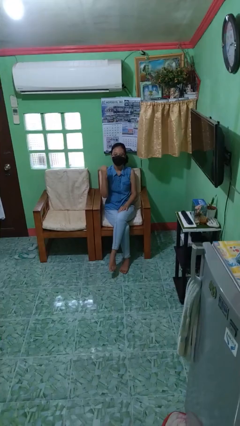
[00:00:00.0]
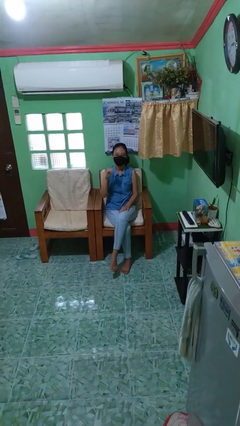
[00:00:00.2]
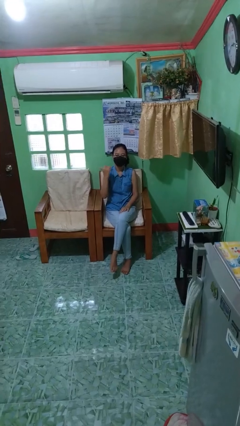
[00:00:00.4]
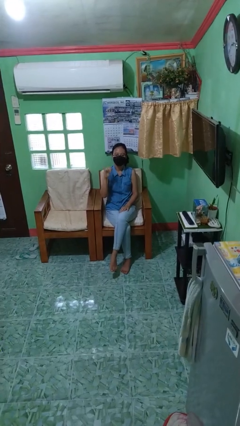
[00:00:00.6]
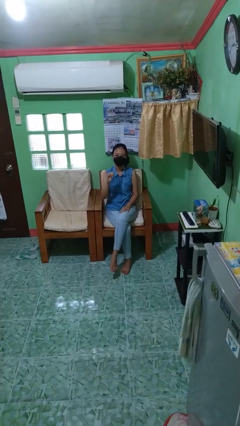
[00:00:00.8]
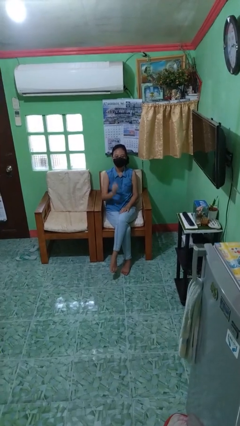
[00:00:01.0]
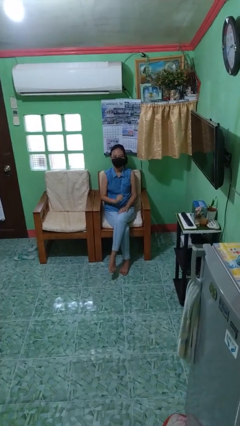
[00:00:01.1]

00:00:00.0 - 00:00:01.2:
person gestures hang loose

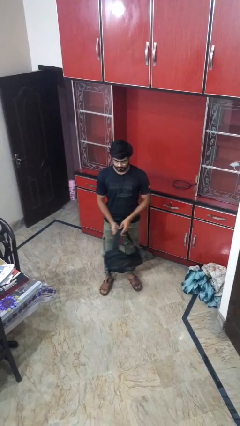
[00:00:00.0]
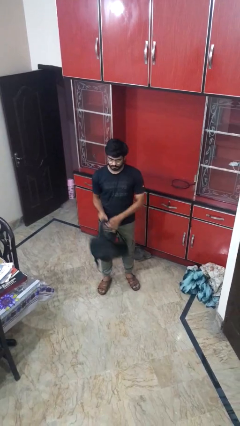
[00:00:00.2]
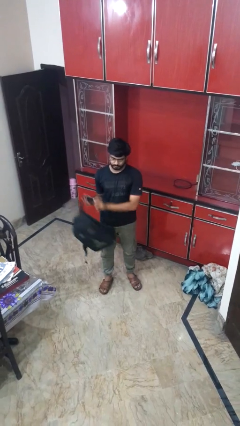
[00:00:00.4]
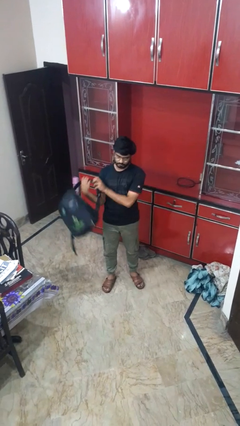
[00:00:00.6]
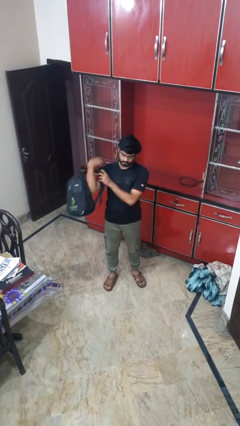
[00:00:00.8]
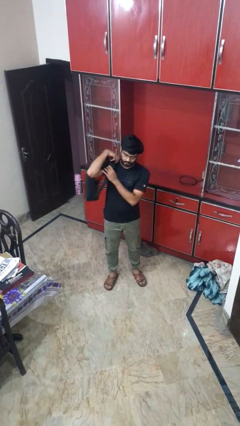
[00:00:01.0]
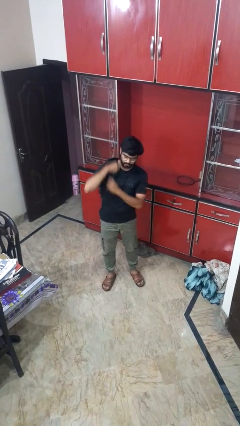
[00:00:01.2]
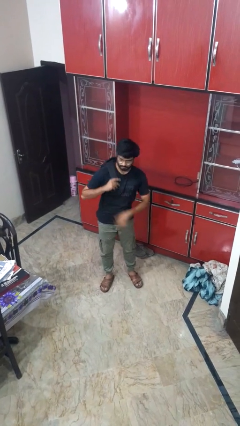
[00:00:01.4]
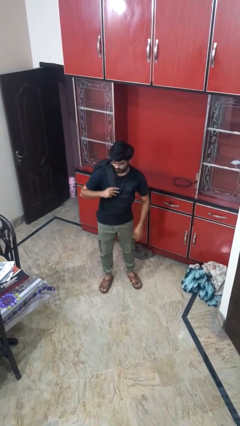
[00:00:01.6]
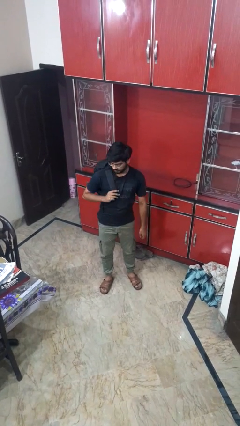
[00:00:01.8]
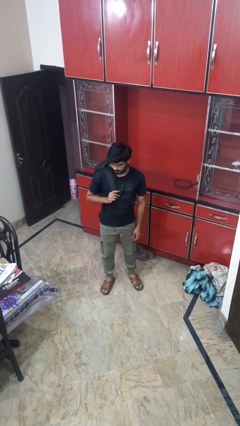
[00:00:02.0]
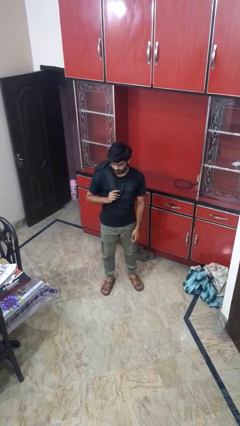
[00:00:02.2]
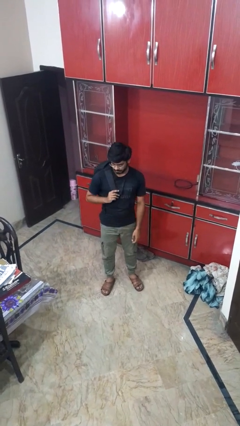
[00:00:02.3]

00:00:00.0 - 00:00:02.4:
person puts on backpack

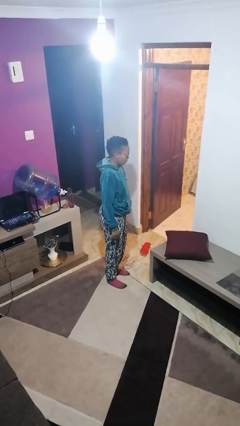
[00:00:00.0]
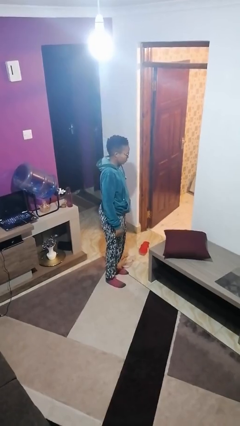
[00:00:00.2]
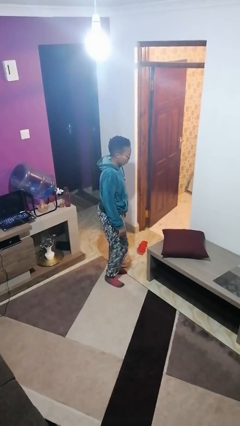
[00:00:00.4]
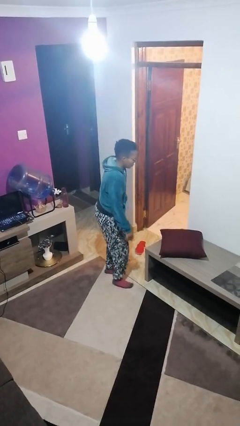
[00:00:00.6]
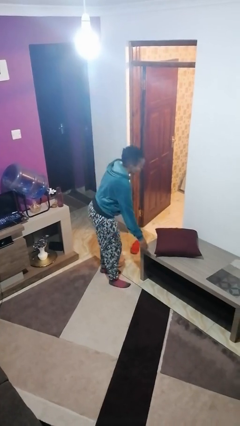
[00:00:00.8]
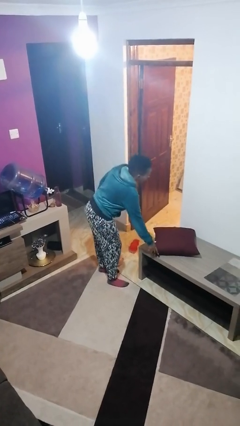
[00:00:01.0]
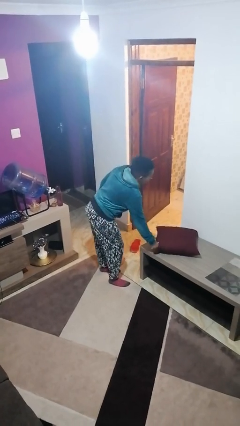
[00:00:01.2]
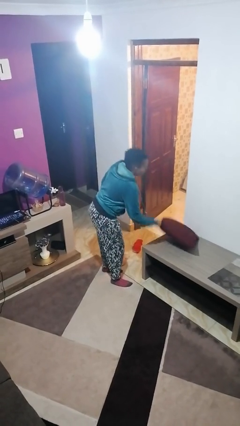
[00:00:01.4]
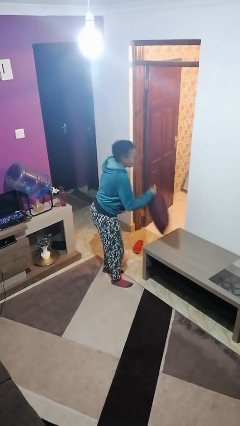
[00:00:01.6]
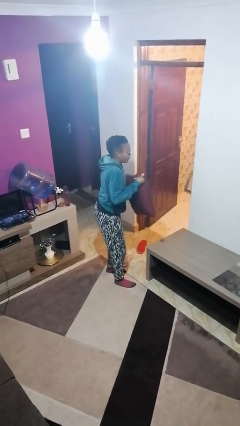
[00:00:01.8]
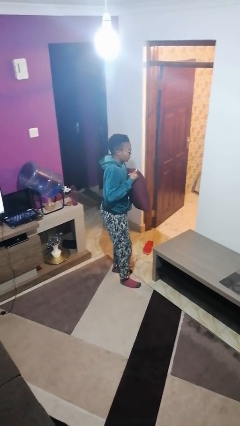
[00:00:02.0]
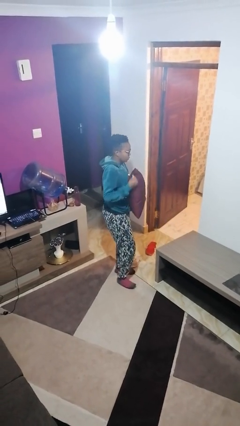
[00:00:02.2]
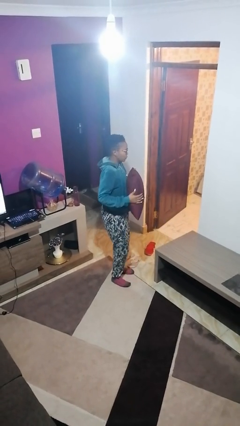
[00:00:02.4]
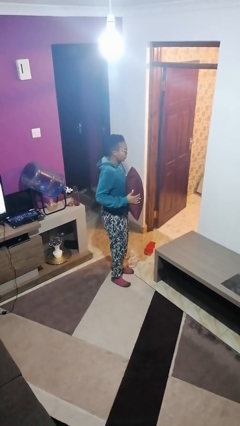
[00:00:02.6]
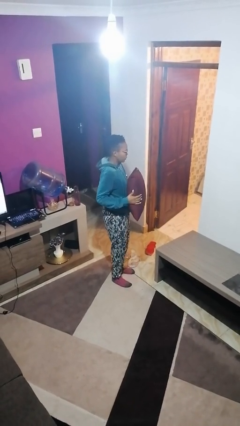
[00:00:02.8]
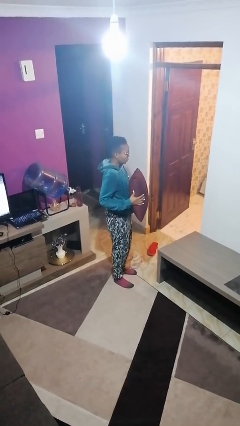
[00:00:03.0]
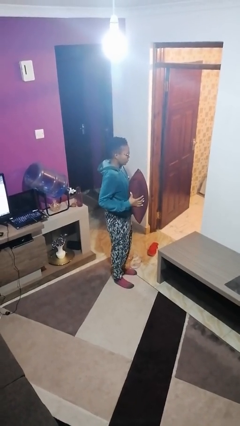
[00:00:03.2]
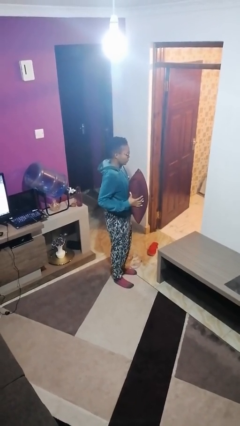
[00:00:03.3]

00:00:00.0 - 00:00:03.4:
person picks up object from table

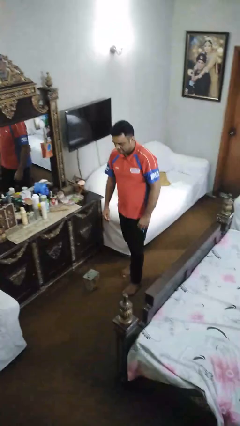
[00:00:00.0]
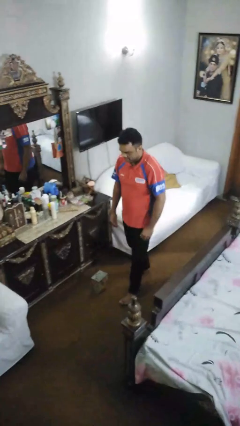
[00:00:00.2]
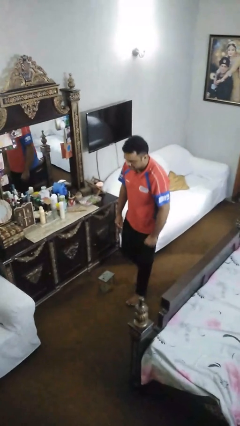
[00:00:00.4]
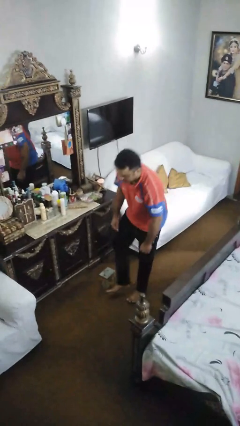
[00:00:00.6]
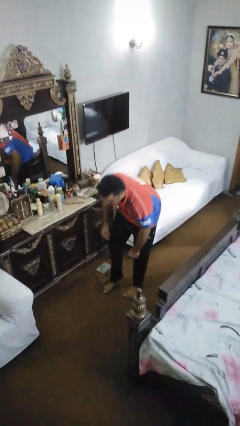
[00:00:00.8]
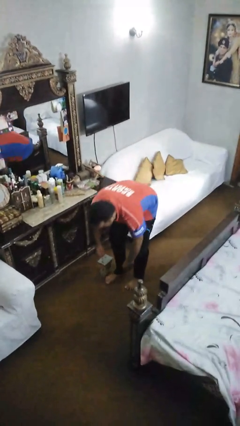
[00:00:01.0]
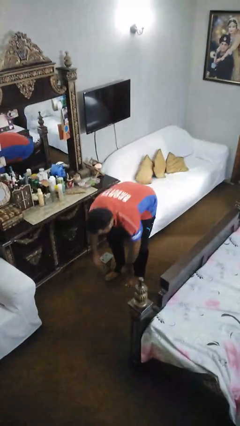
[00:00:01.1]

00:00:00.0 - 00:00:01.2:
person trips on object on floor

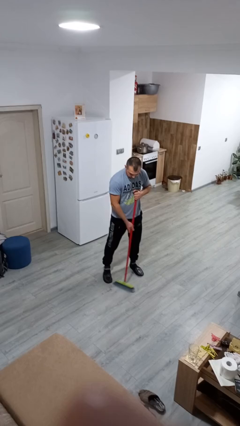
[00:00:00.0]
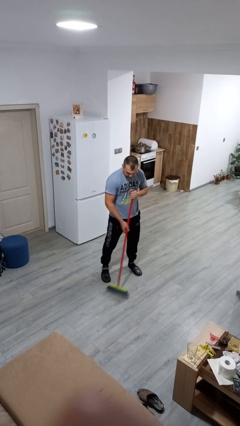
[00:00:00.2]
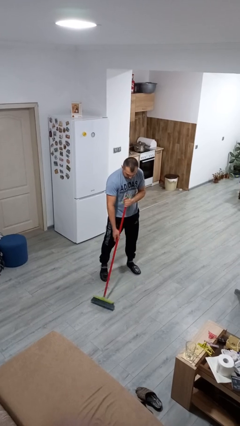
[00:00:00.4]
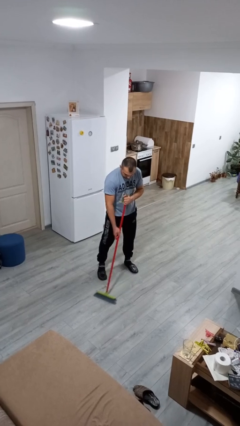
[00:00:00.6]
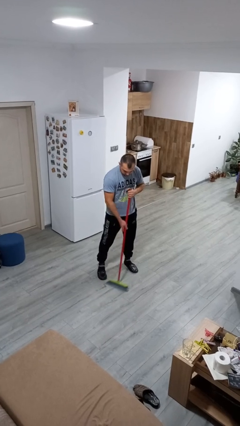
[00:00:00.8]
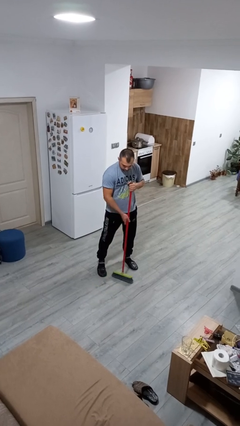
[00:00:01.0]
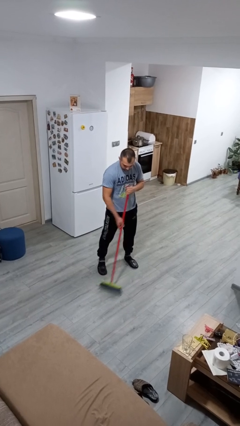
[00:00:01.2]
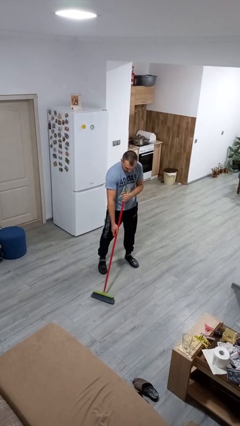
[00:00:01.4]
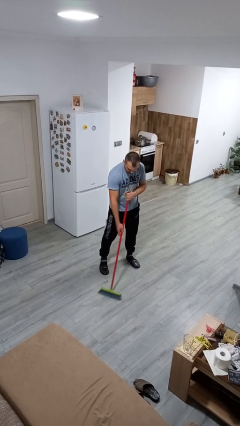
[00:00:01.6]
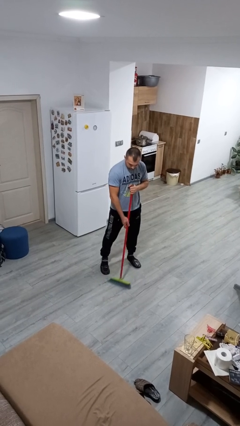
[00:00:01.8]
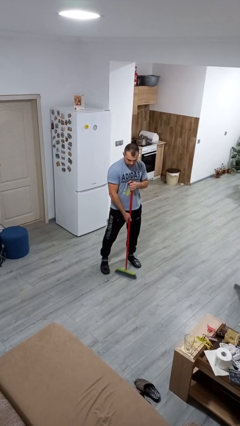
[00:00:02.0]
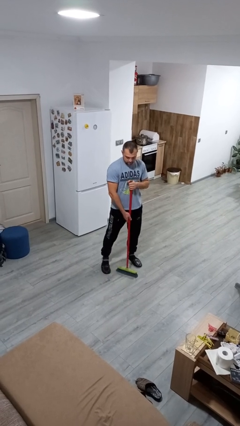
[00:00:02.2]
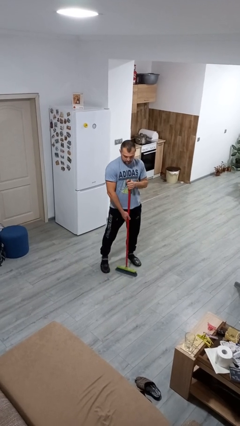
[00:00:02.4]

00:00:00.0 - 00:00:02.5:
person sweeps floor

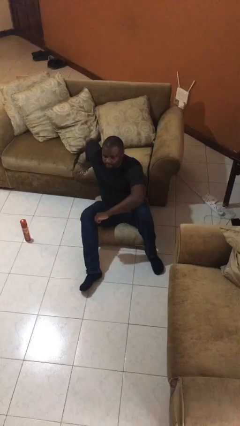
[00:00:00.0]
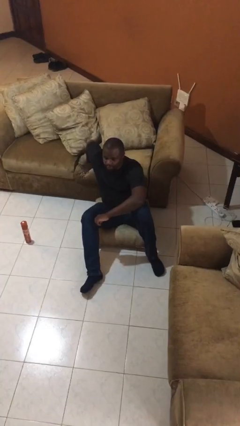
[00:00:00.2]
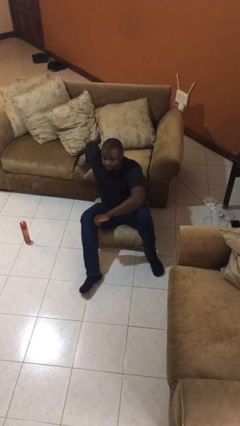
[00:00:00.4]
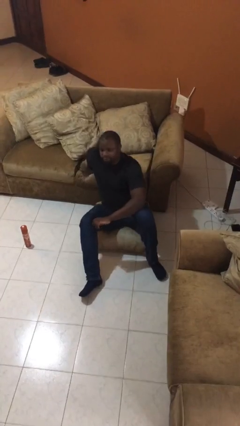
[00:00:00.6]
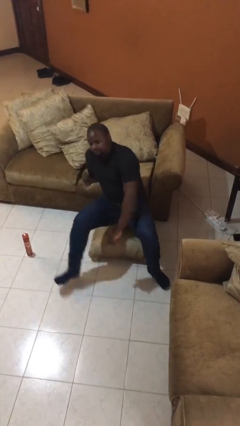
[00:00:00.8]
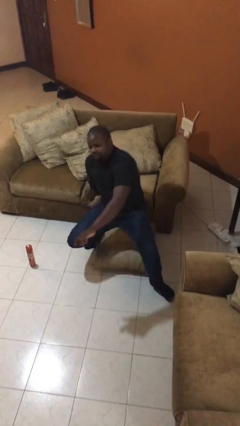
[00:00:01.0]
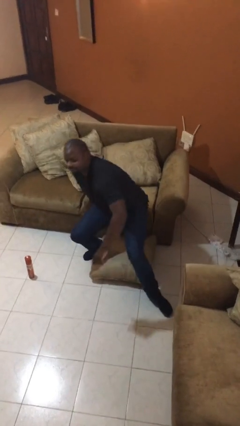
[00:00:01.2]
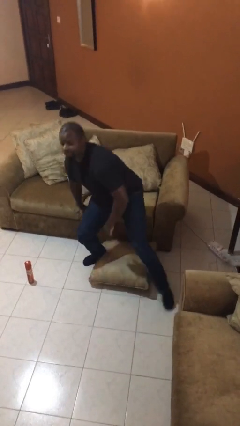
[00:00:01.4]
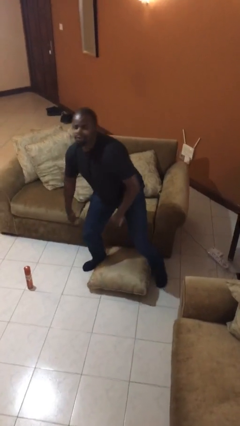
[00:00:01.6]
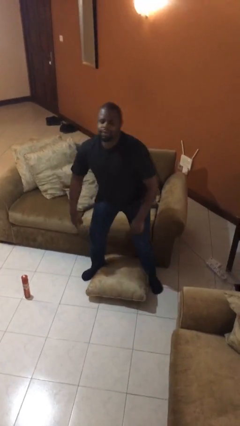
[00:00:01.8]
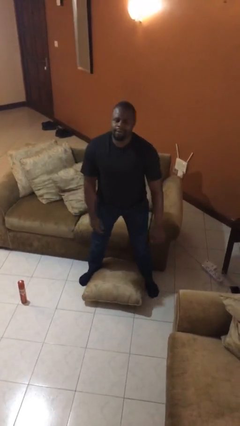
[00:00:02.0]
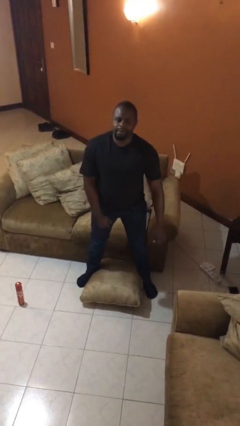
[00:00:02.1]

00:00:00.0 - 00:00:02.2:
person stands up from floor

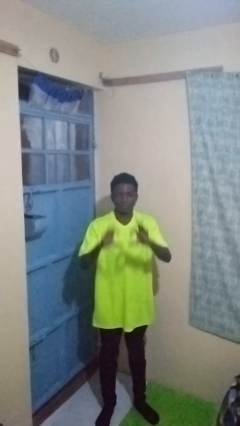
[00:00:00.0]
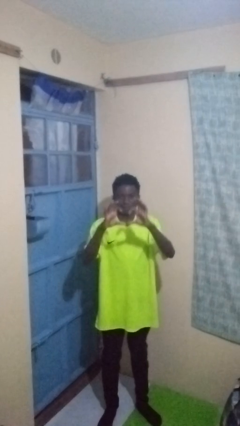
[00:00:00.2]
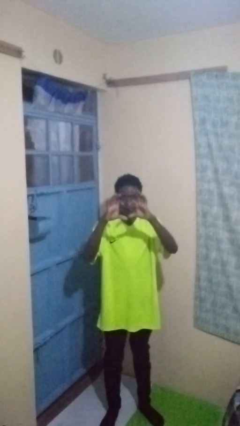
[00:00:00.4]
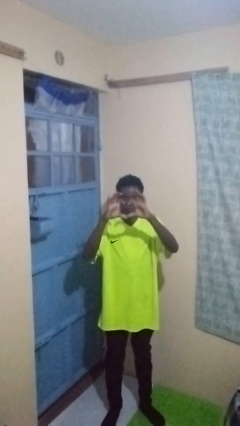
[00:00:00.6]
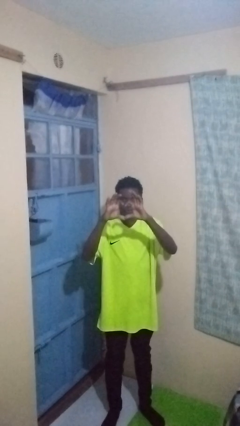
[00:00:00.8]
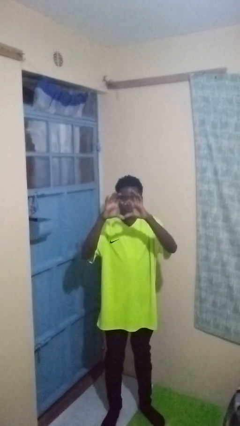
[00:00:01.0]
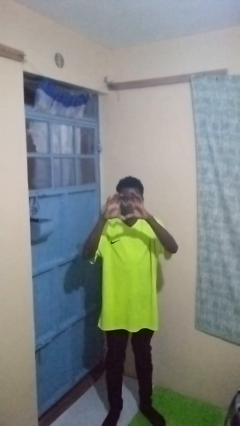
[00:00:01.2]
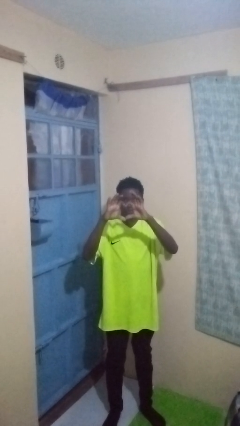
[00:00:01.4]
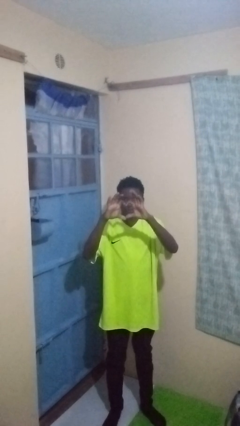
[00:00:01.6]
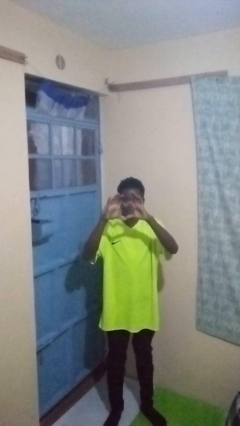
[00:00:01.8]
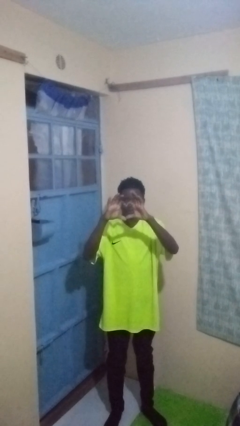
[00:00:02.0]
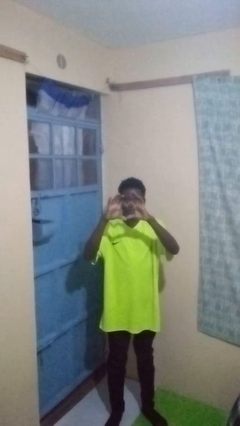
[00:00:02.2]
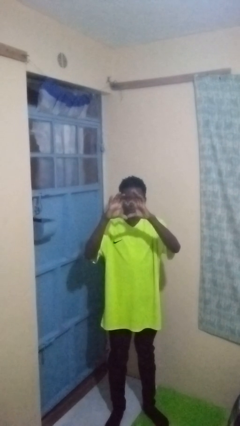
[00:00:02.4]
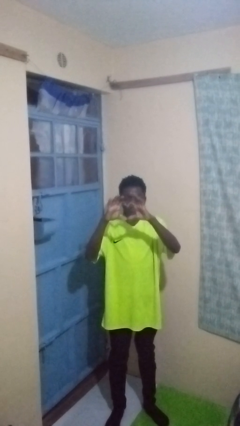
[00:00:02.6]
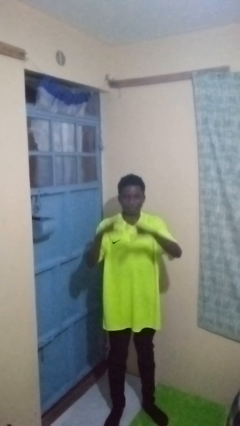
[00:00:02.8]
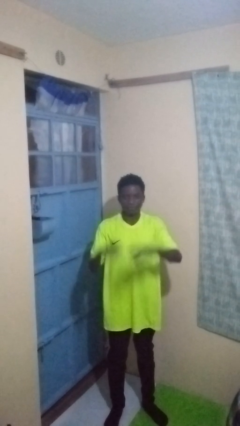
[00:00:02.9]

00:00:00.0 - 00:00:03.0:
person gestures heart

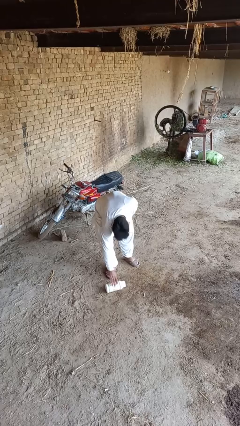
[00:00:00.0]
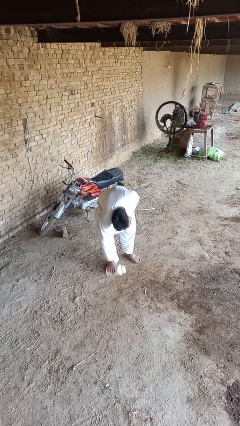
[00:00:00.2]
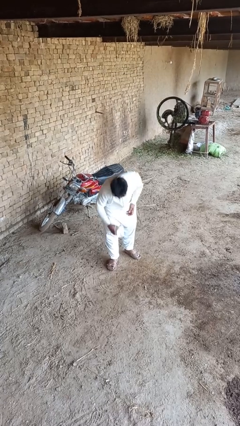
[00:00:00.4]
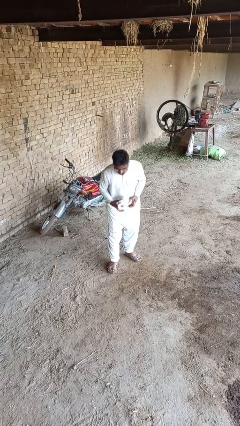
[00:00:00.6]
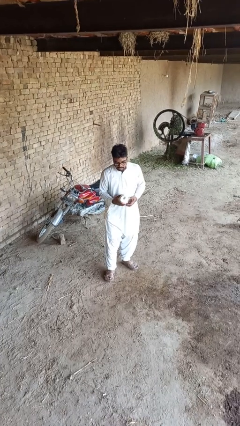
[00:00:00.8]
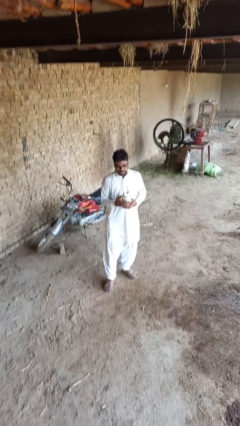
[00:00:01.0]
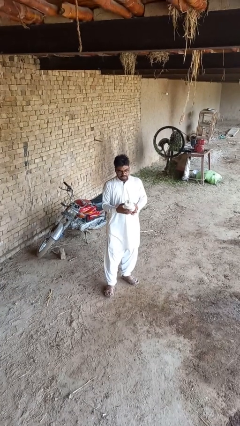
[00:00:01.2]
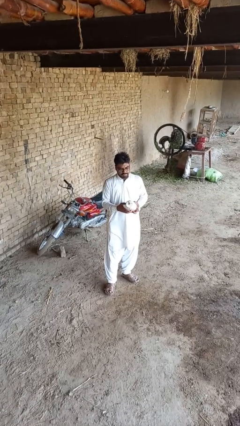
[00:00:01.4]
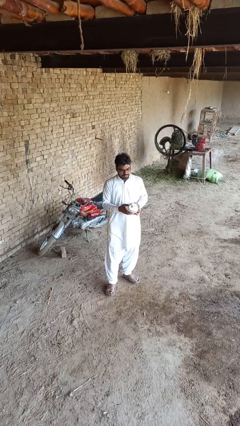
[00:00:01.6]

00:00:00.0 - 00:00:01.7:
person picks up object from floor
